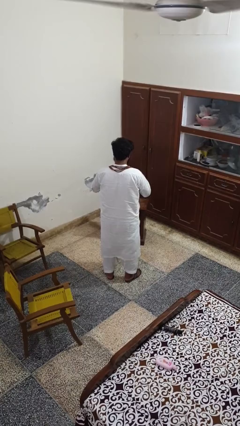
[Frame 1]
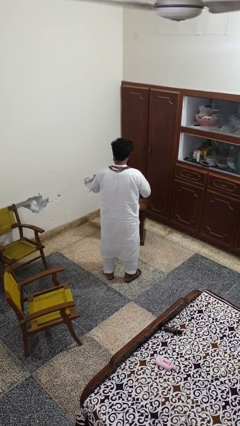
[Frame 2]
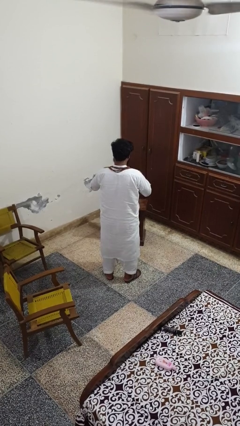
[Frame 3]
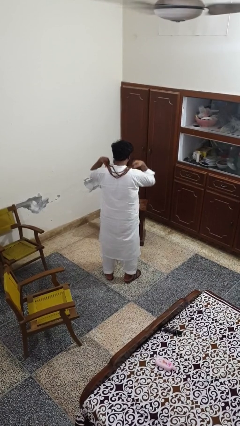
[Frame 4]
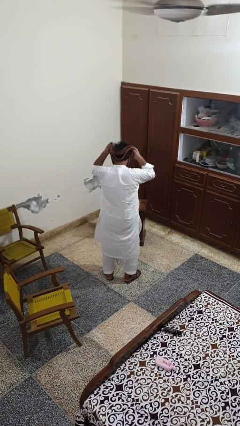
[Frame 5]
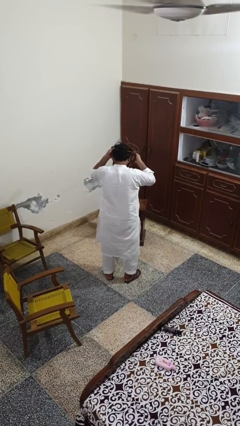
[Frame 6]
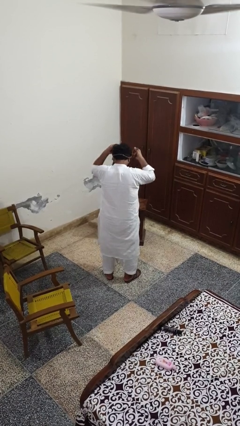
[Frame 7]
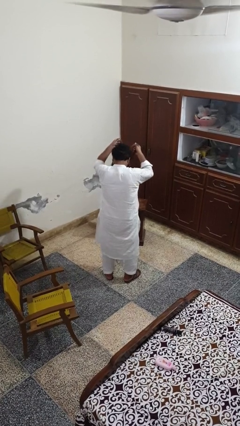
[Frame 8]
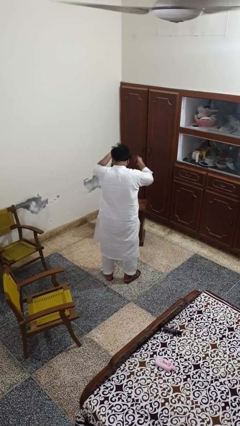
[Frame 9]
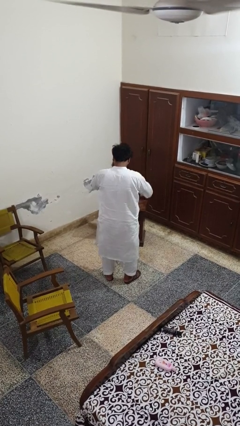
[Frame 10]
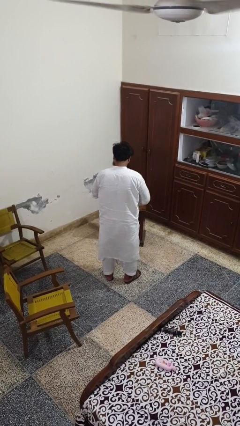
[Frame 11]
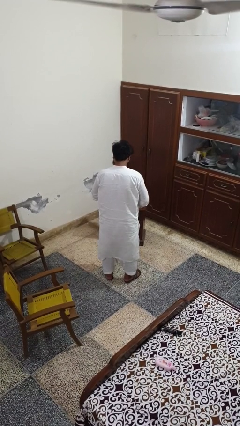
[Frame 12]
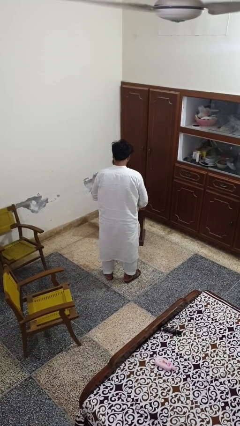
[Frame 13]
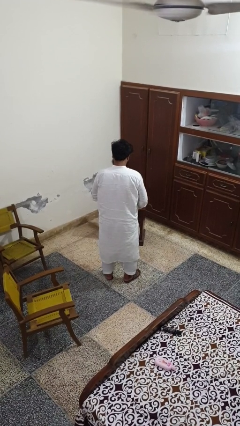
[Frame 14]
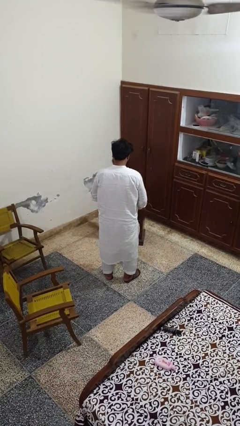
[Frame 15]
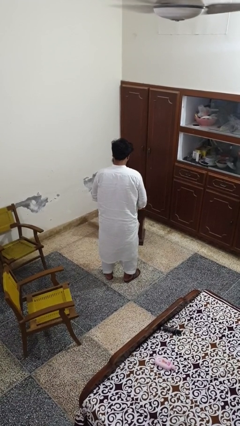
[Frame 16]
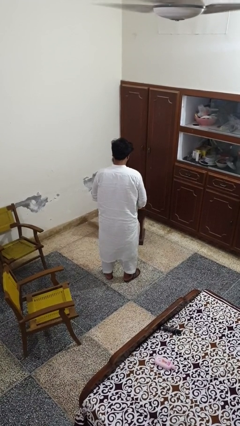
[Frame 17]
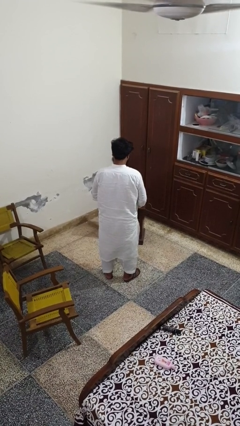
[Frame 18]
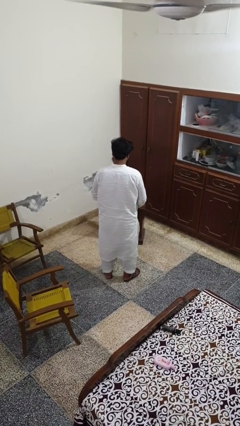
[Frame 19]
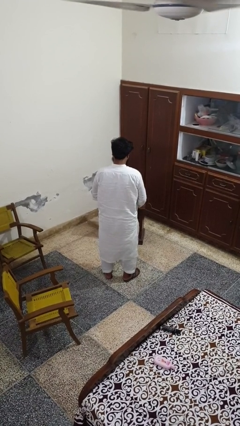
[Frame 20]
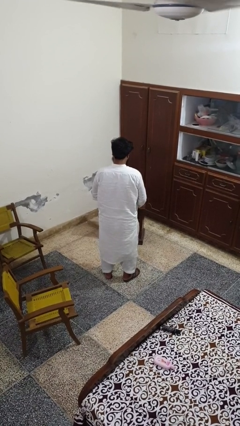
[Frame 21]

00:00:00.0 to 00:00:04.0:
person takes off necklace

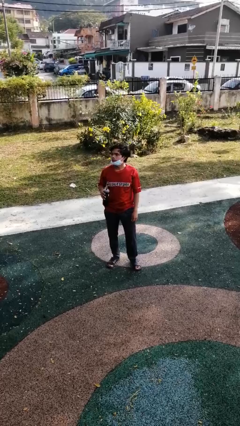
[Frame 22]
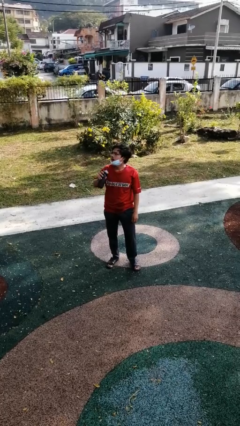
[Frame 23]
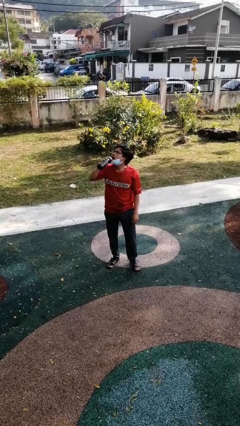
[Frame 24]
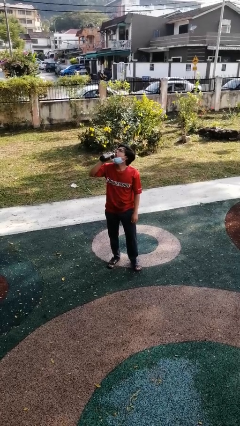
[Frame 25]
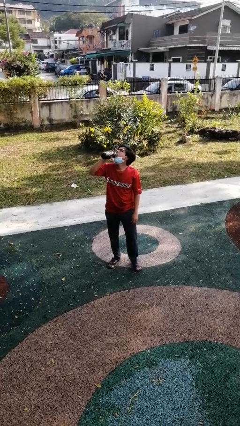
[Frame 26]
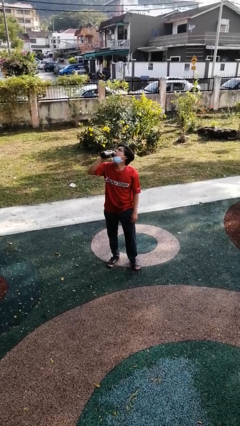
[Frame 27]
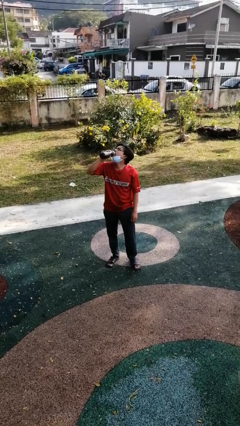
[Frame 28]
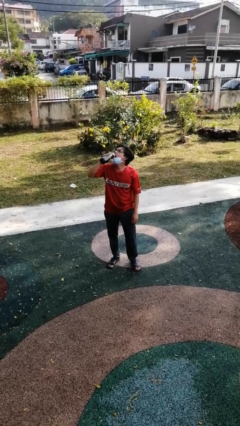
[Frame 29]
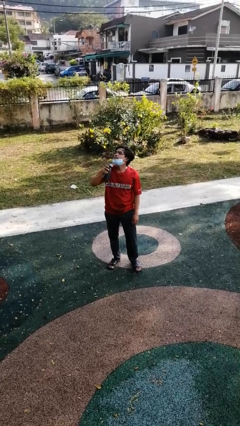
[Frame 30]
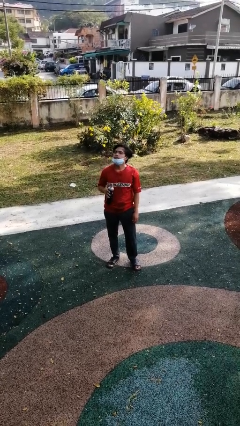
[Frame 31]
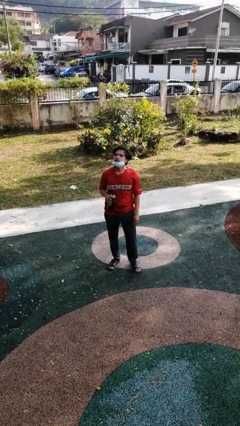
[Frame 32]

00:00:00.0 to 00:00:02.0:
person drinks from bottle

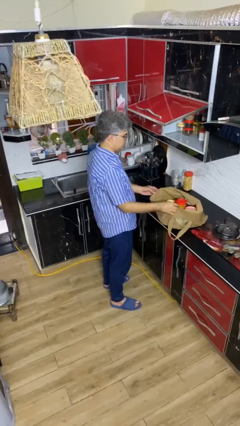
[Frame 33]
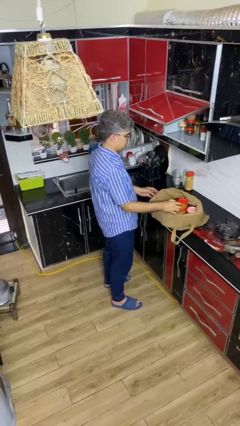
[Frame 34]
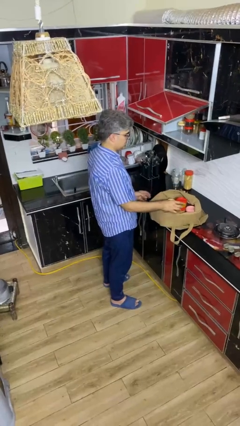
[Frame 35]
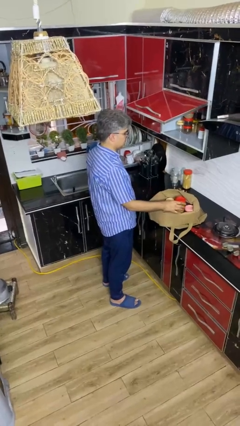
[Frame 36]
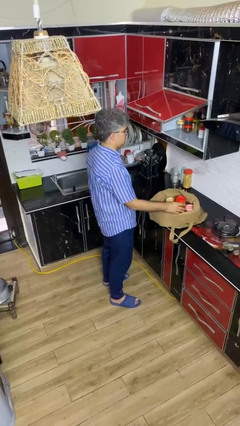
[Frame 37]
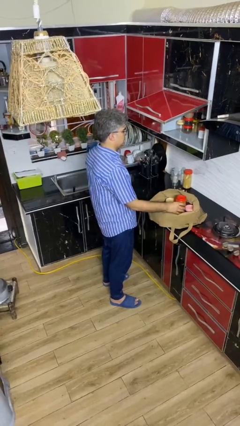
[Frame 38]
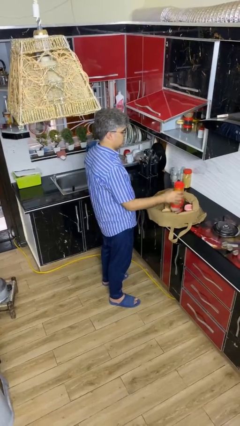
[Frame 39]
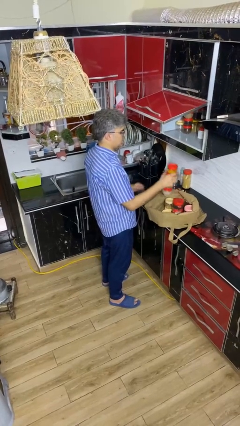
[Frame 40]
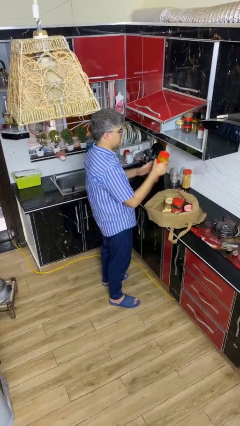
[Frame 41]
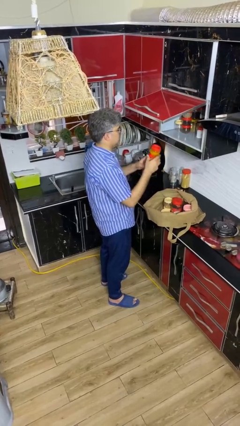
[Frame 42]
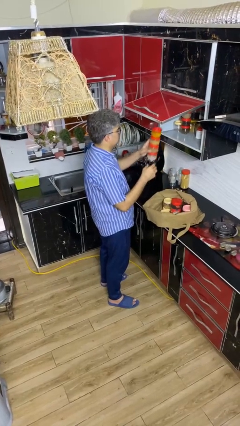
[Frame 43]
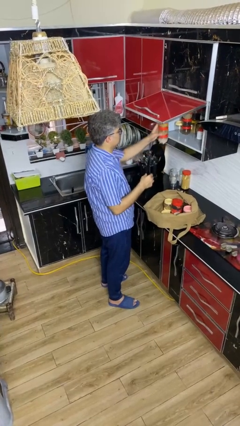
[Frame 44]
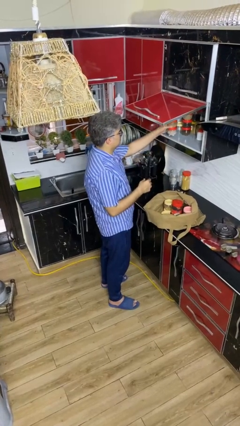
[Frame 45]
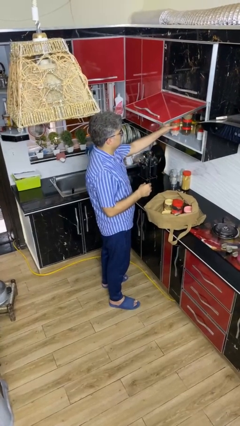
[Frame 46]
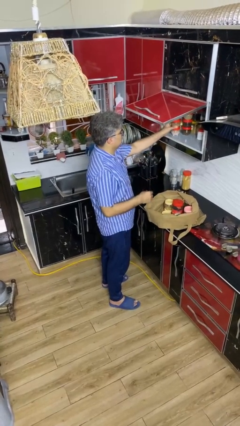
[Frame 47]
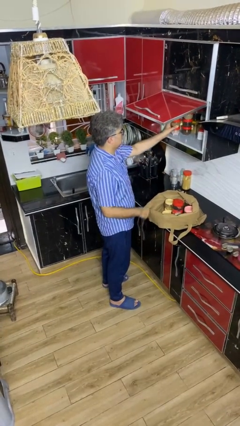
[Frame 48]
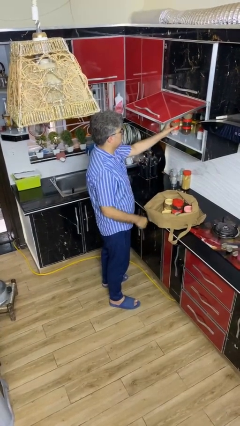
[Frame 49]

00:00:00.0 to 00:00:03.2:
person loads groceries into cabinet

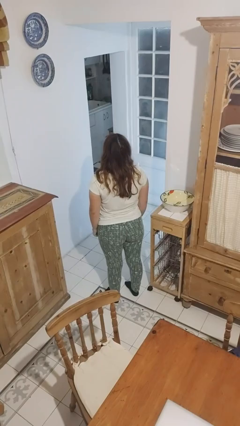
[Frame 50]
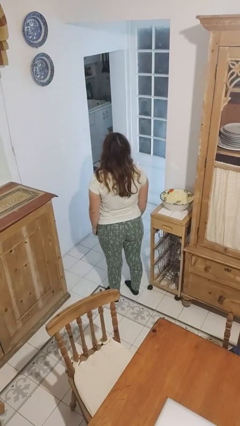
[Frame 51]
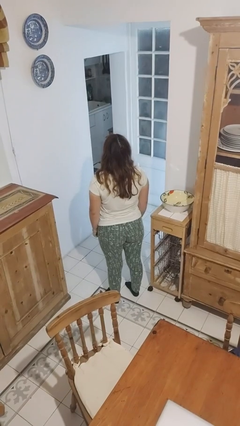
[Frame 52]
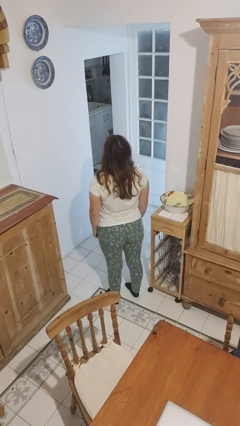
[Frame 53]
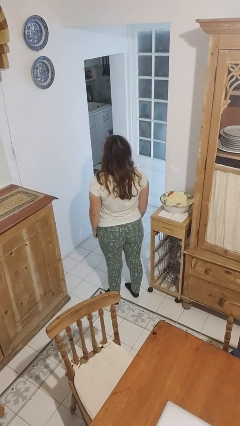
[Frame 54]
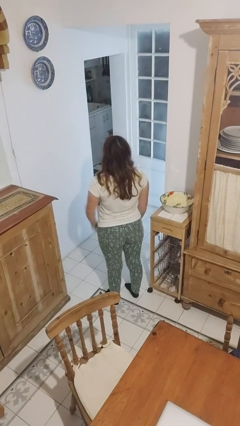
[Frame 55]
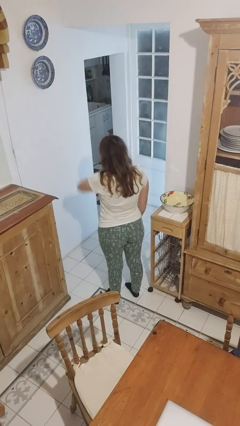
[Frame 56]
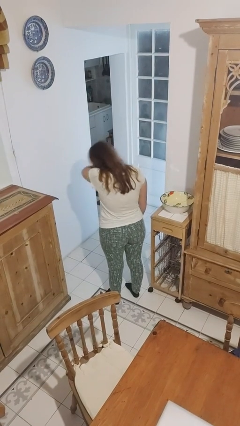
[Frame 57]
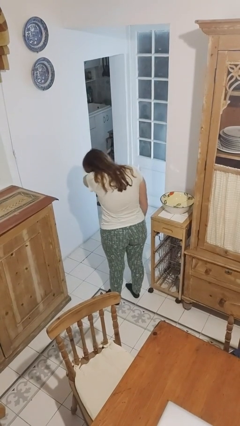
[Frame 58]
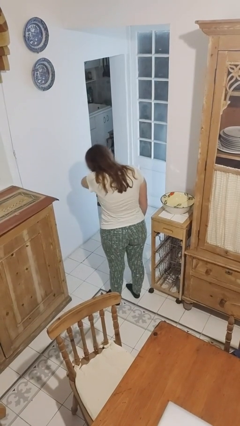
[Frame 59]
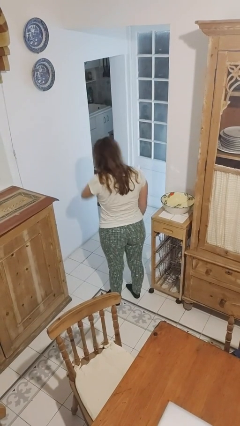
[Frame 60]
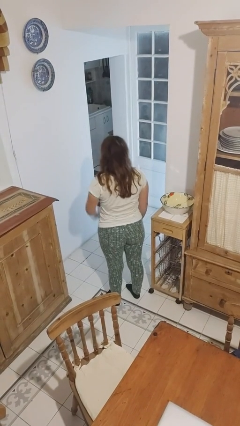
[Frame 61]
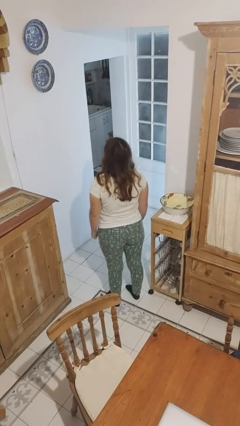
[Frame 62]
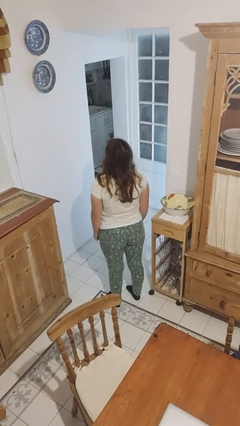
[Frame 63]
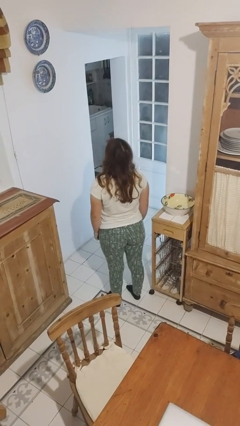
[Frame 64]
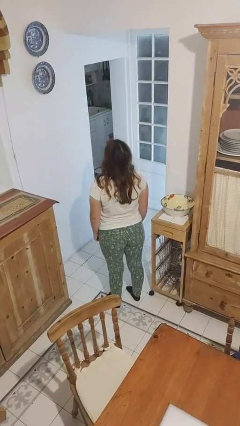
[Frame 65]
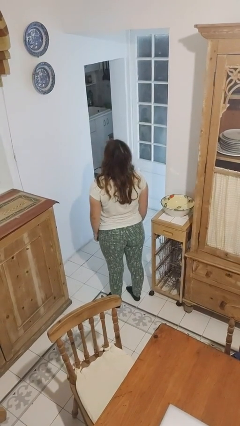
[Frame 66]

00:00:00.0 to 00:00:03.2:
person sneezes into arm

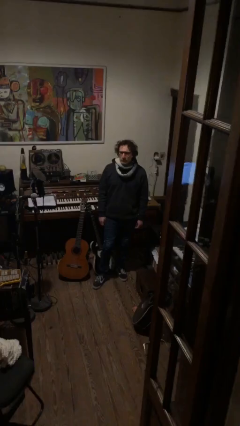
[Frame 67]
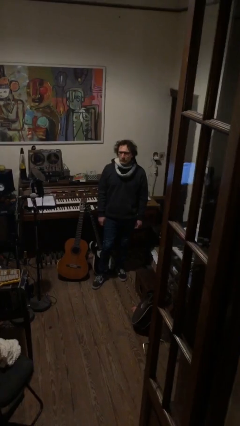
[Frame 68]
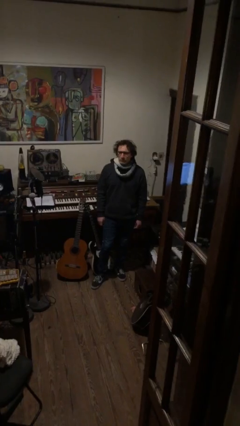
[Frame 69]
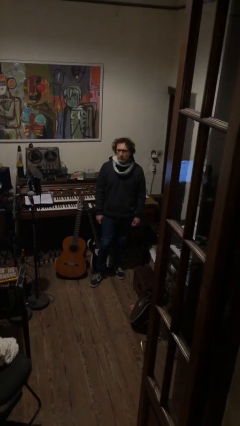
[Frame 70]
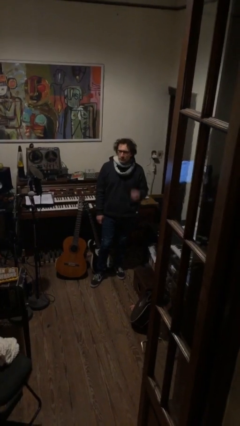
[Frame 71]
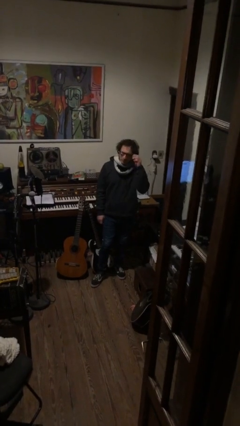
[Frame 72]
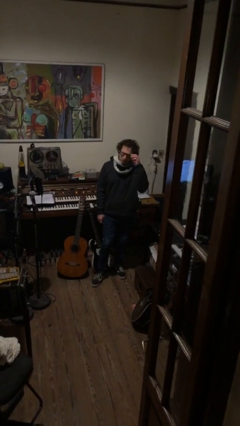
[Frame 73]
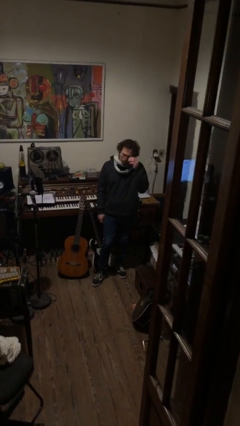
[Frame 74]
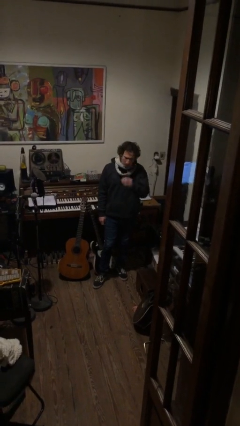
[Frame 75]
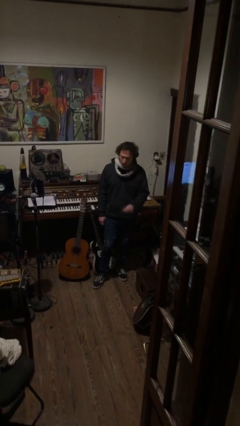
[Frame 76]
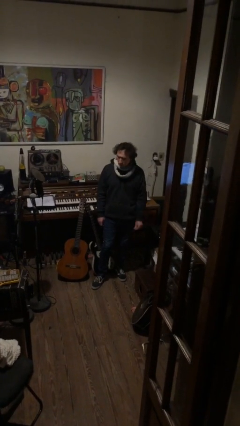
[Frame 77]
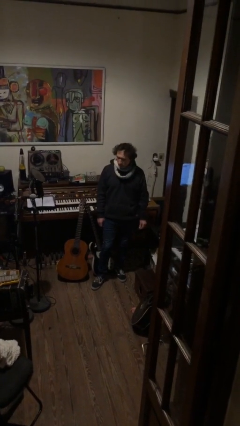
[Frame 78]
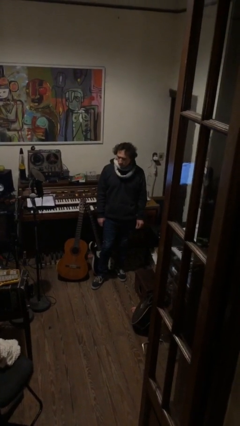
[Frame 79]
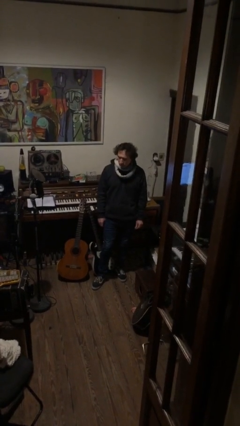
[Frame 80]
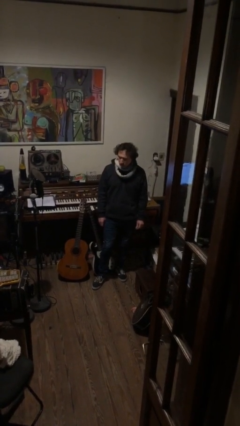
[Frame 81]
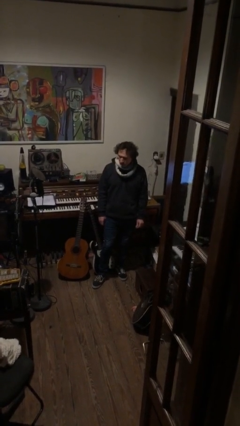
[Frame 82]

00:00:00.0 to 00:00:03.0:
person takes off glasses

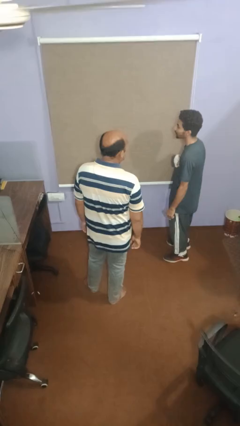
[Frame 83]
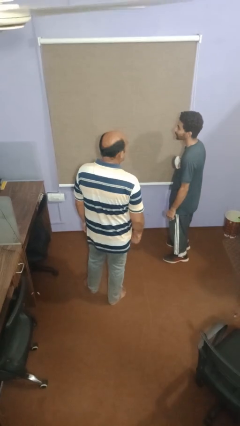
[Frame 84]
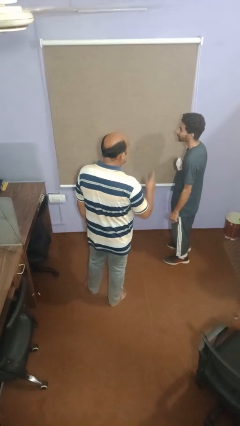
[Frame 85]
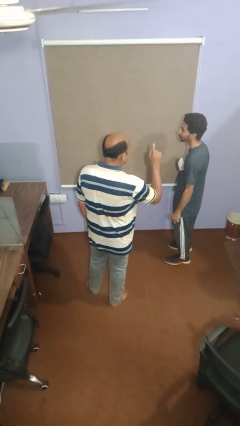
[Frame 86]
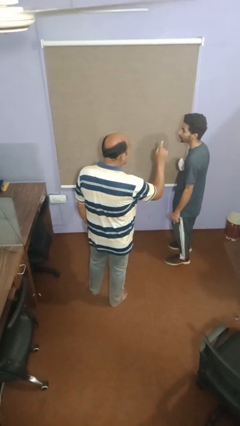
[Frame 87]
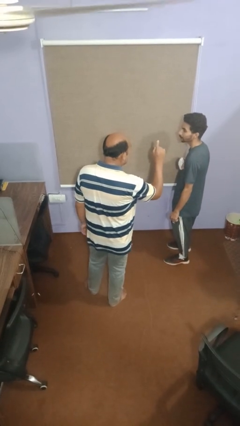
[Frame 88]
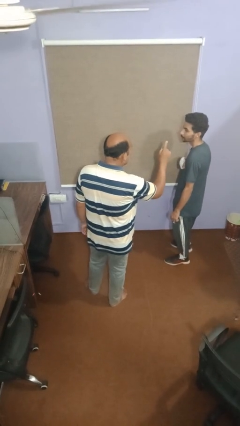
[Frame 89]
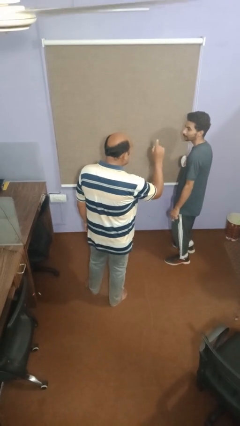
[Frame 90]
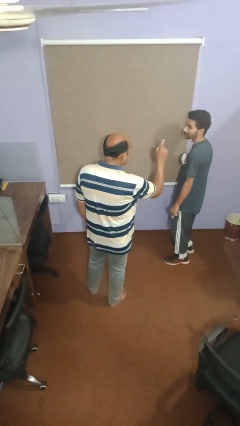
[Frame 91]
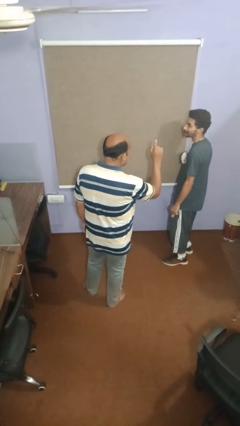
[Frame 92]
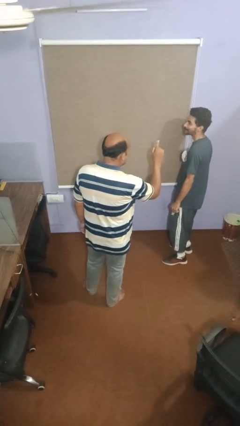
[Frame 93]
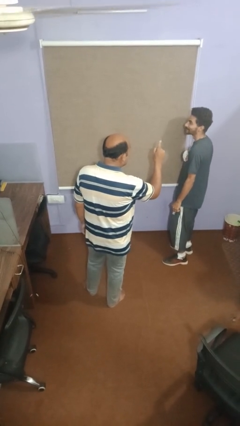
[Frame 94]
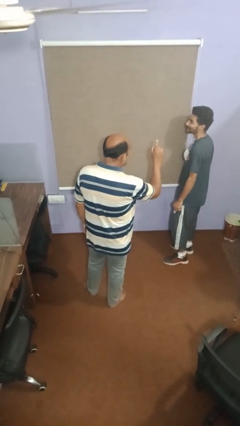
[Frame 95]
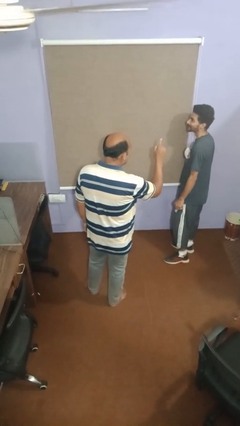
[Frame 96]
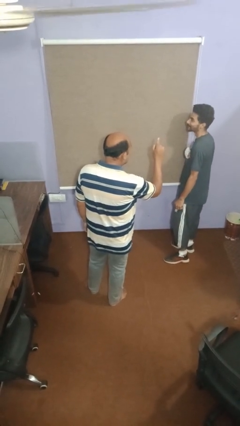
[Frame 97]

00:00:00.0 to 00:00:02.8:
person points at person
